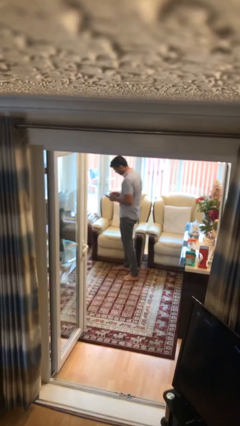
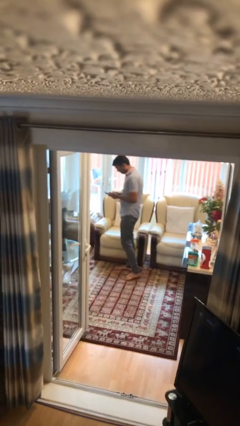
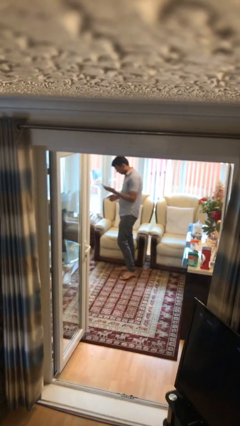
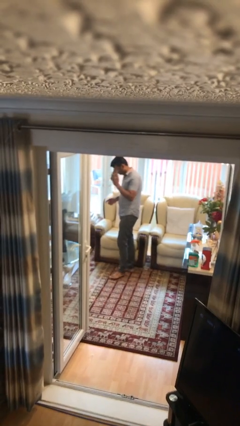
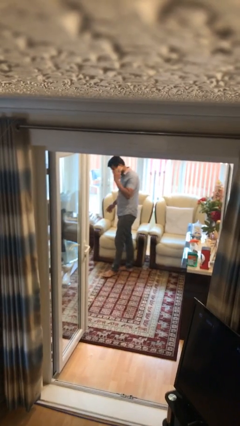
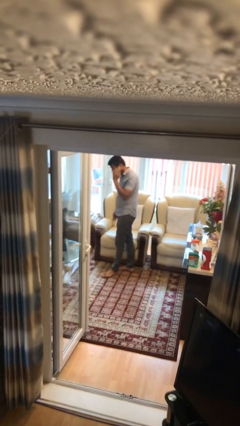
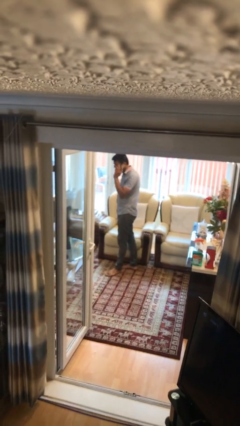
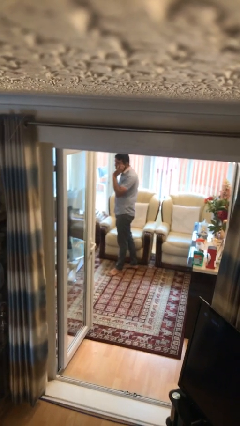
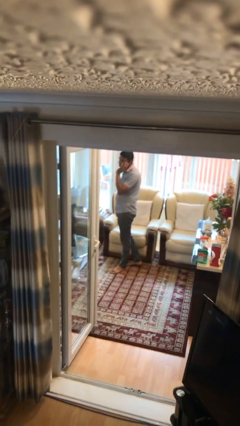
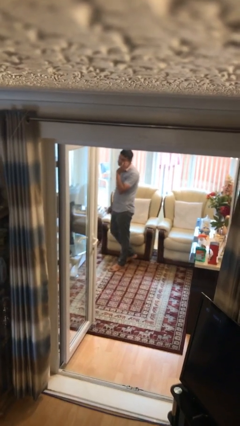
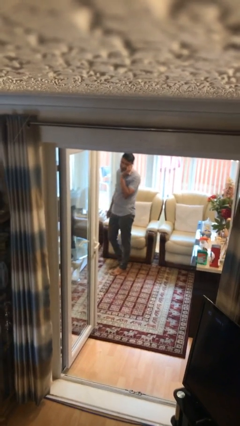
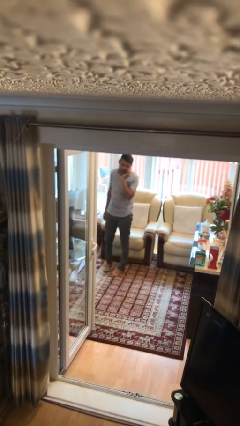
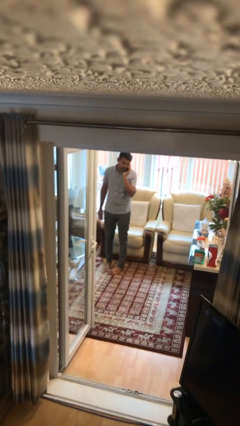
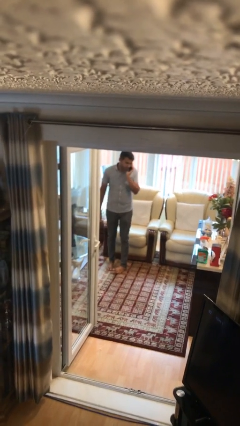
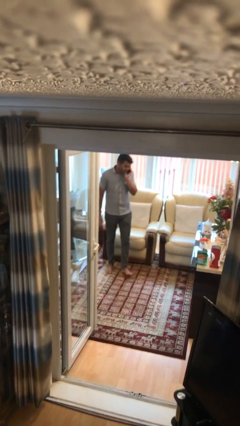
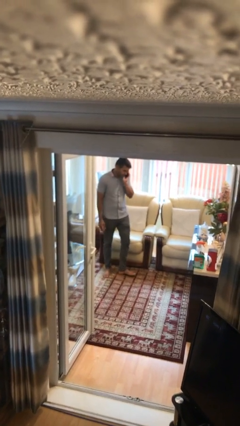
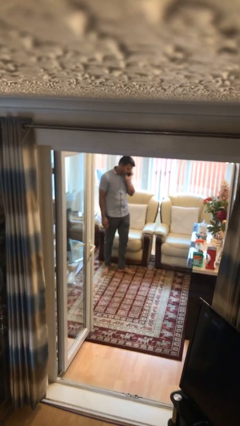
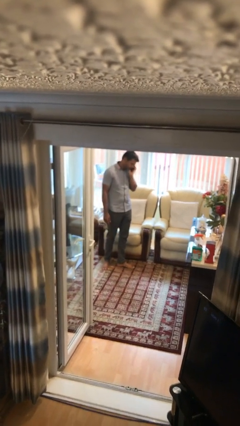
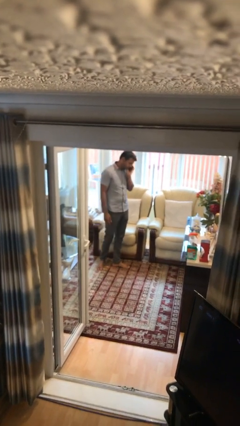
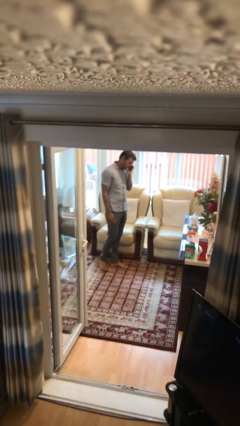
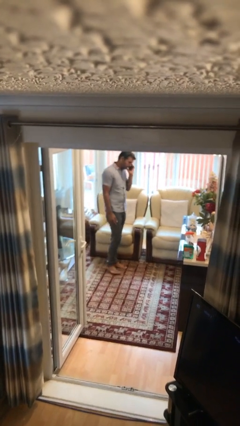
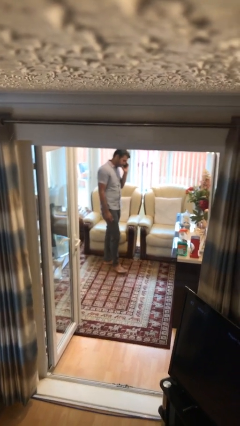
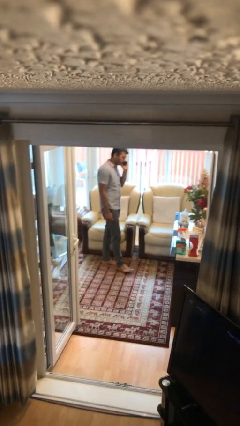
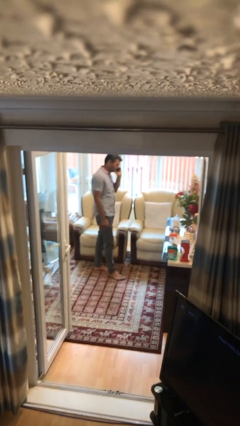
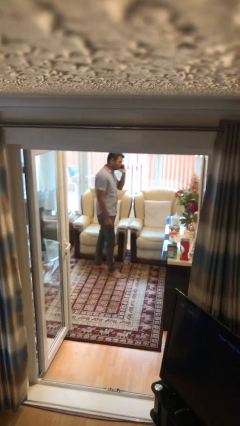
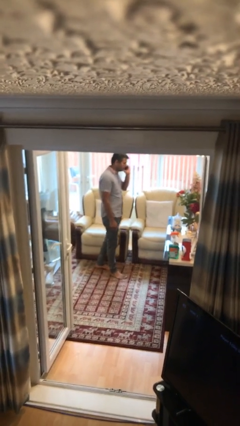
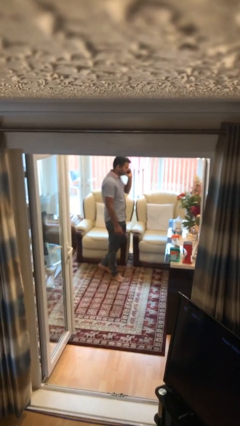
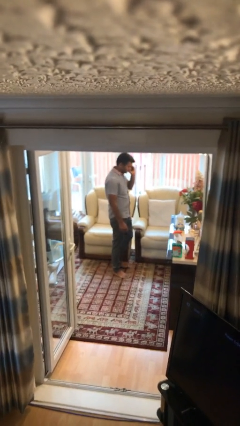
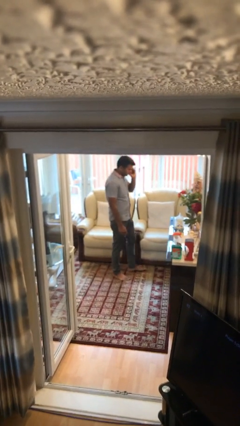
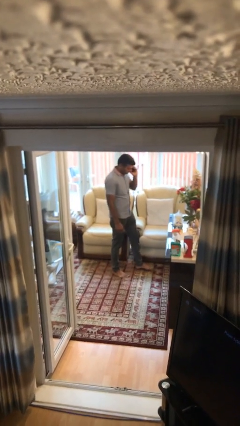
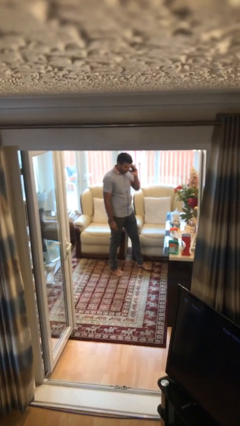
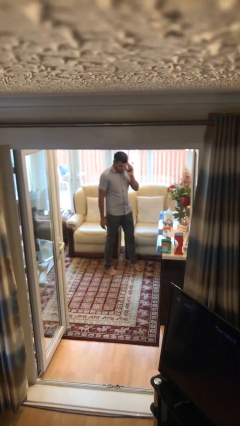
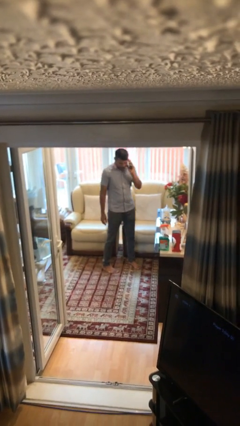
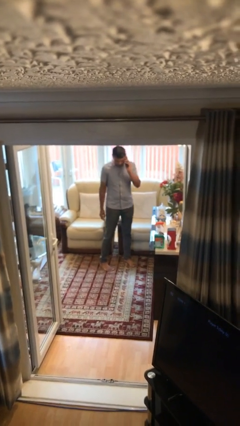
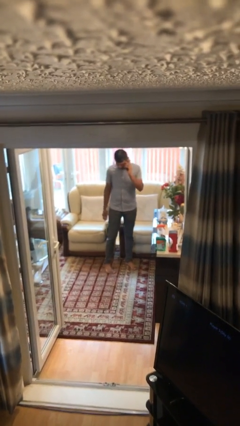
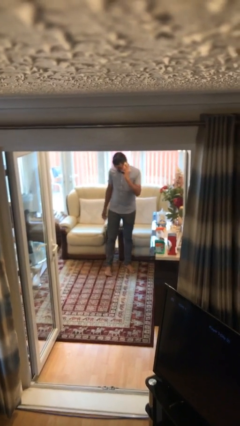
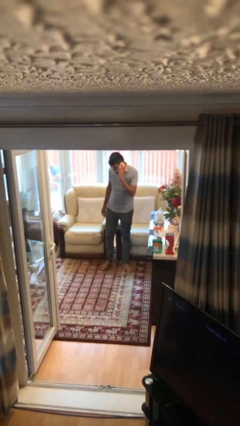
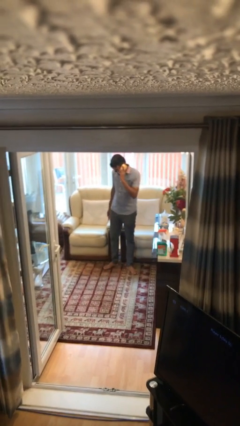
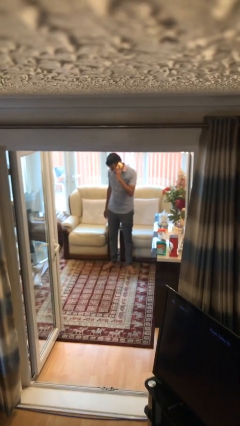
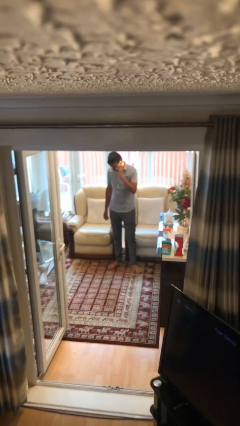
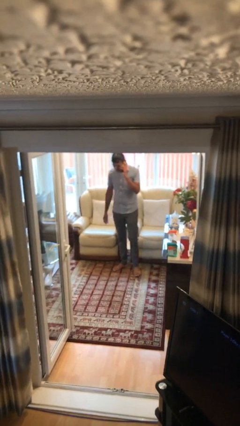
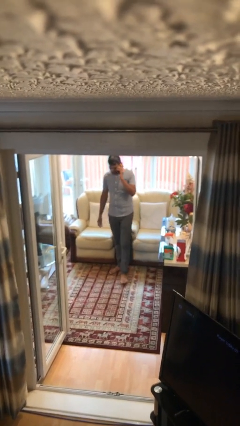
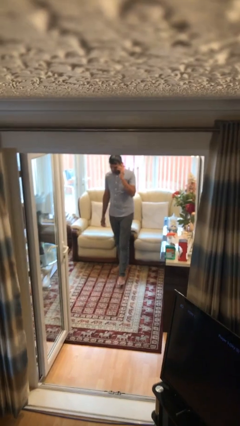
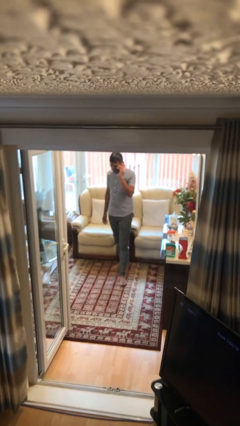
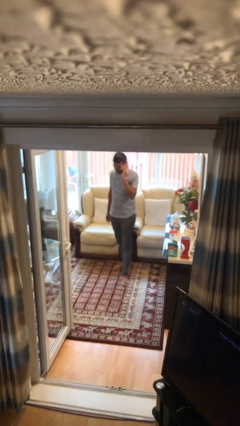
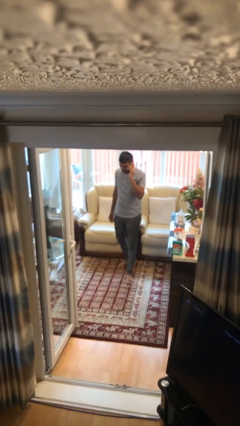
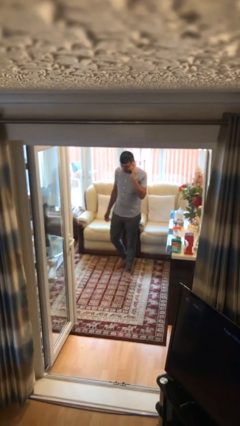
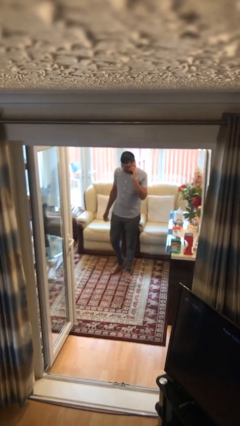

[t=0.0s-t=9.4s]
person talks on phone

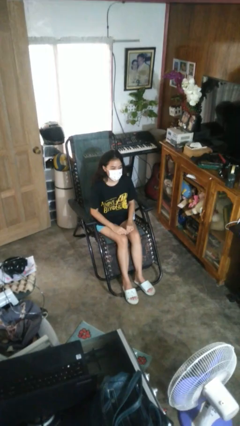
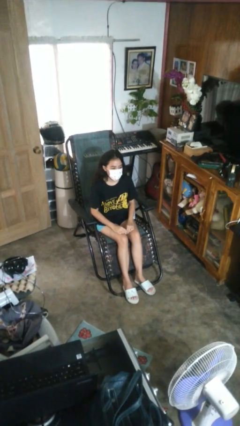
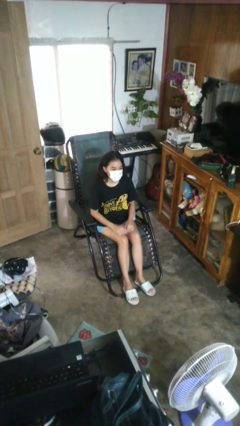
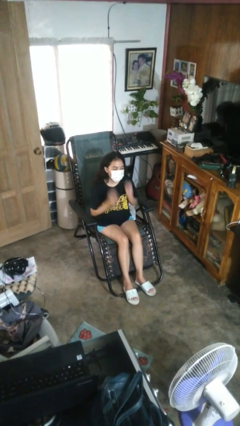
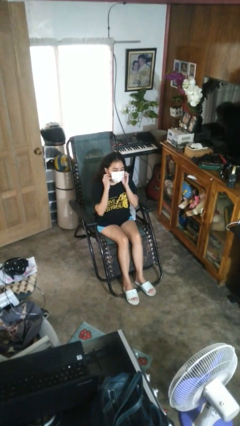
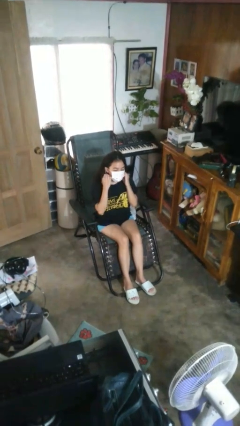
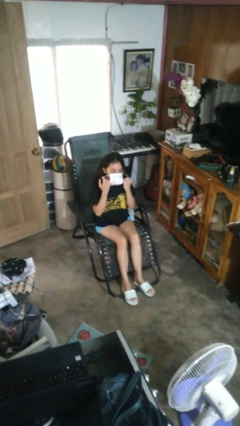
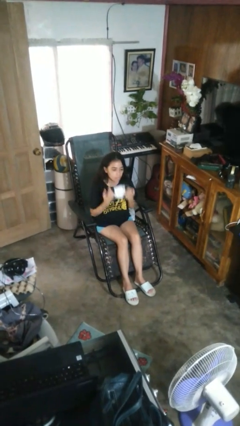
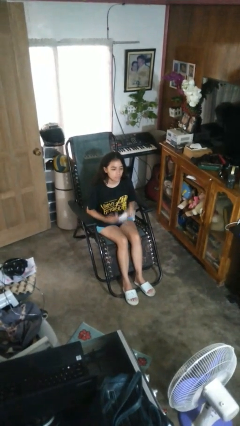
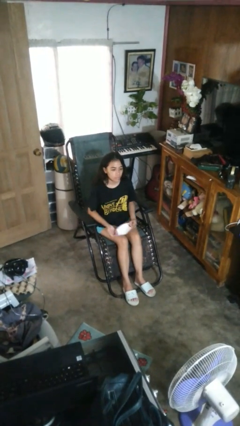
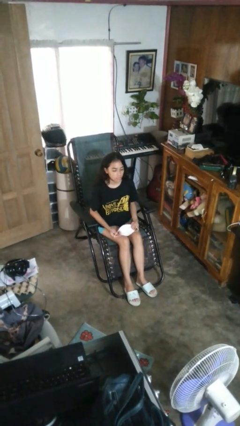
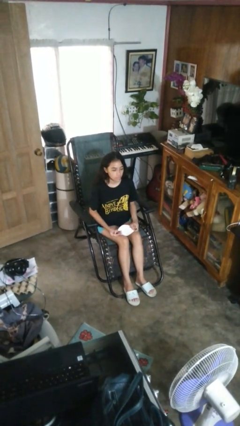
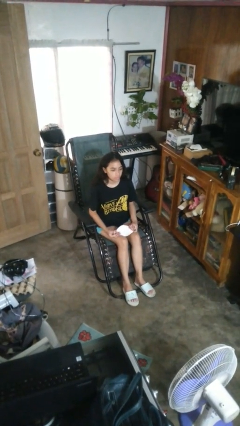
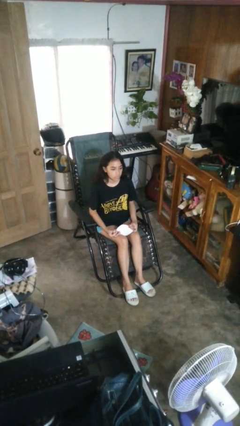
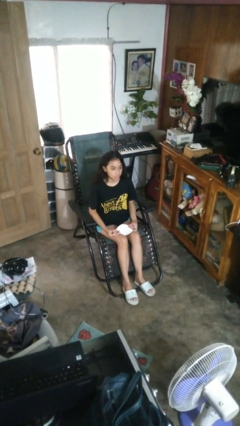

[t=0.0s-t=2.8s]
person takes off facemask

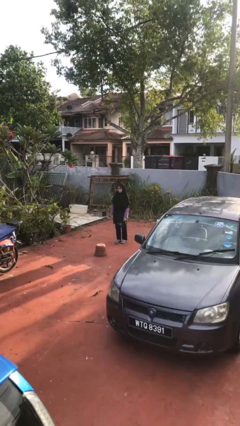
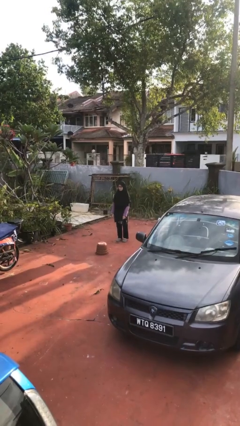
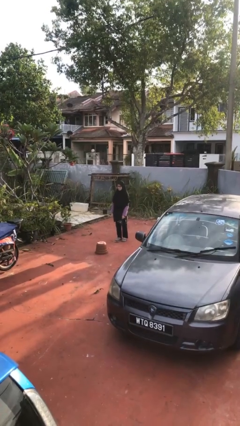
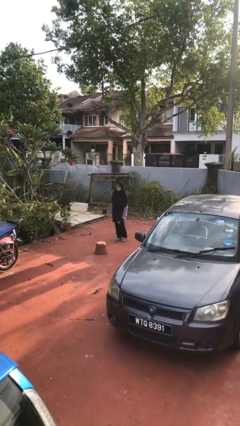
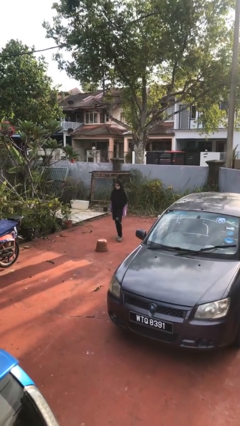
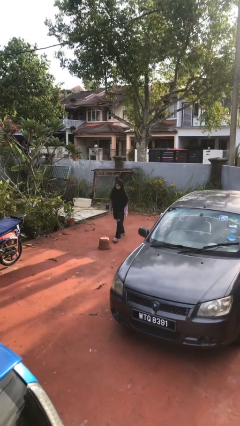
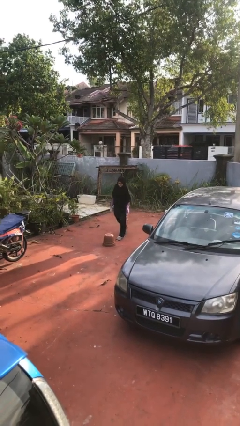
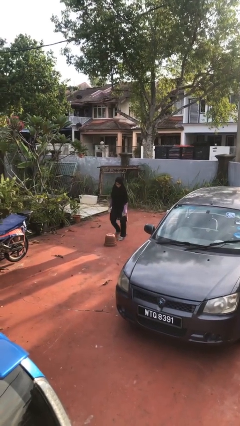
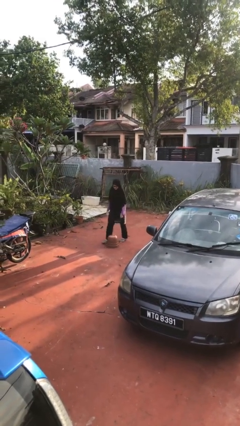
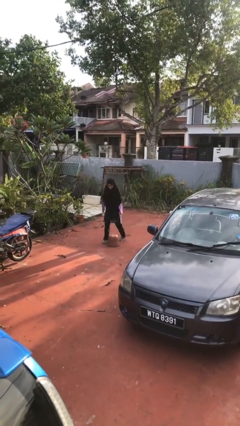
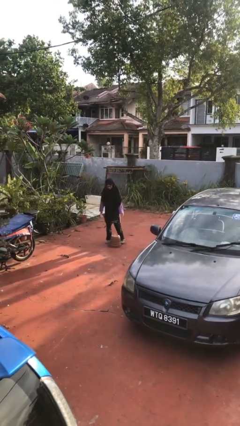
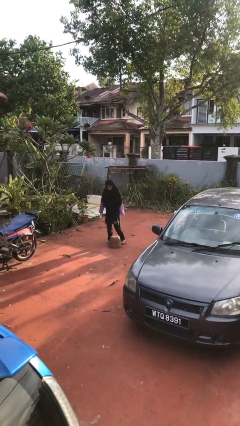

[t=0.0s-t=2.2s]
person trips on object on floor

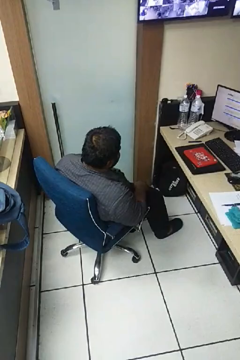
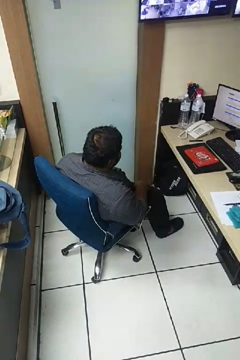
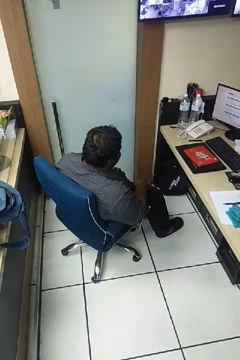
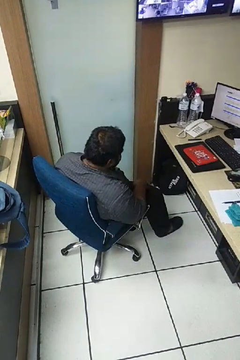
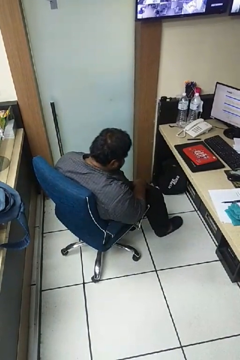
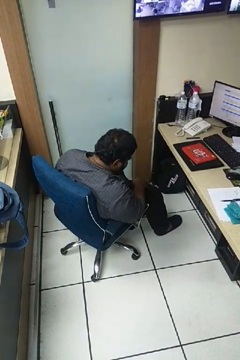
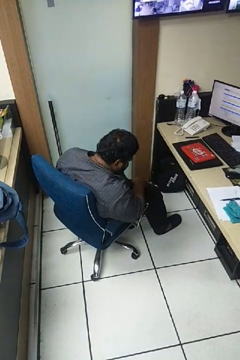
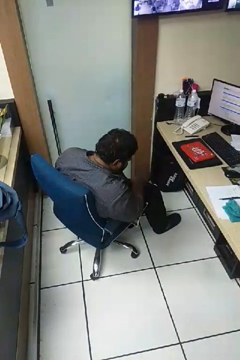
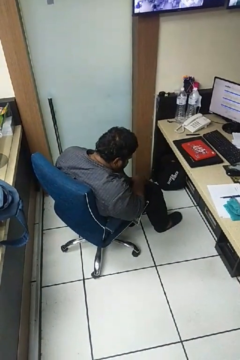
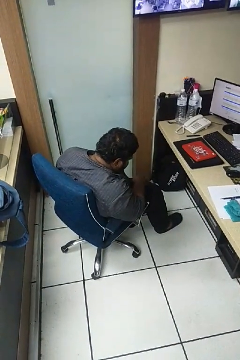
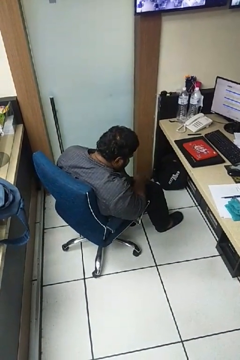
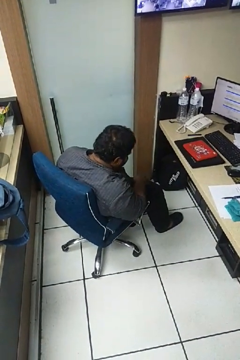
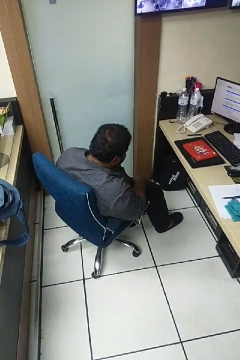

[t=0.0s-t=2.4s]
person looks at hands in lap

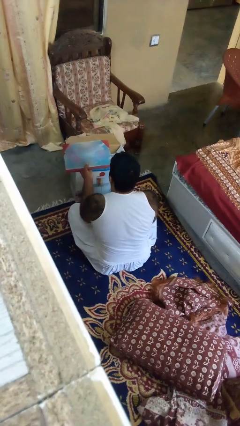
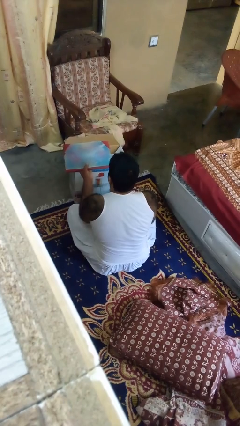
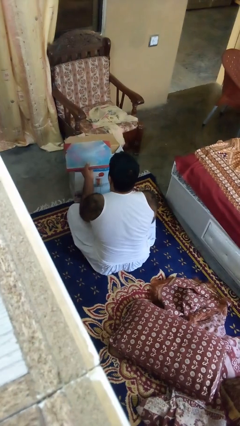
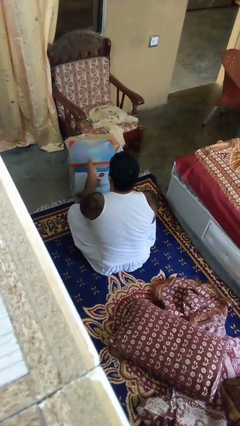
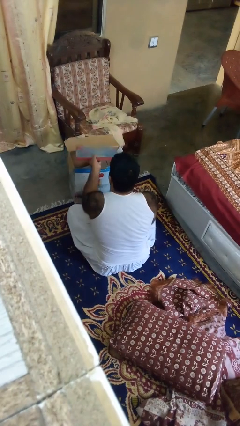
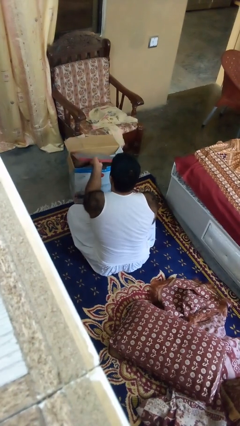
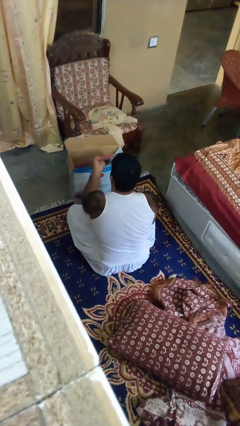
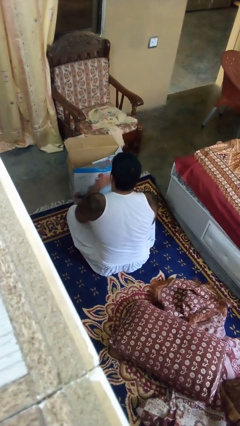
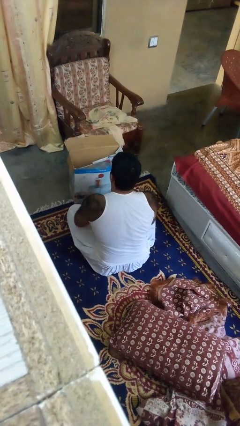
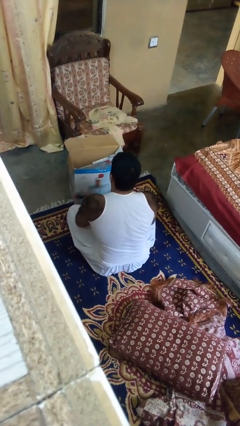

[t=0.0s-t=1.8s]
person puts object into box
